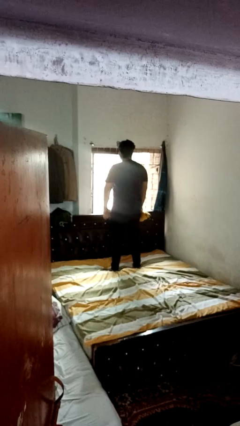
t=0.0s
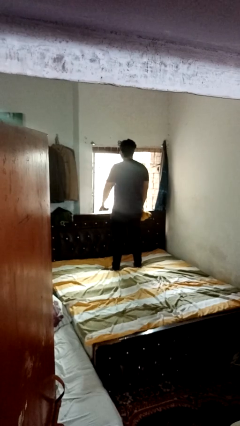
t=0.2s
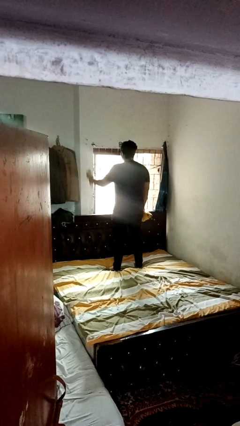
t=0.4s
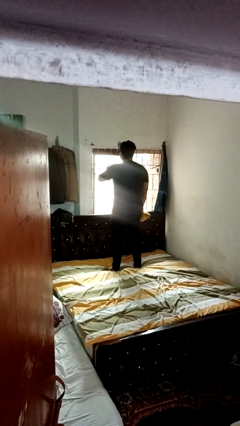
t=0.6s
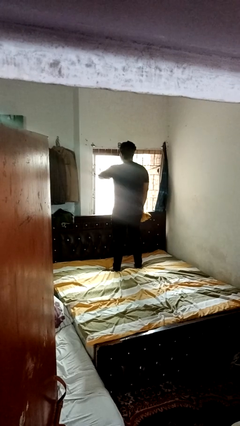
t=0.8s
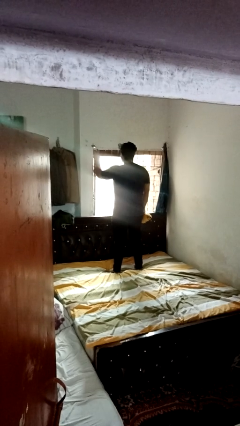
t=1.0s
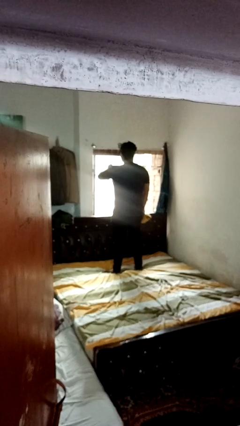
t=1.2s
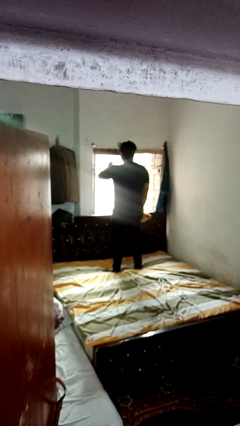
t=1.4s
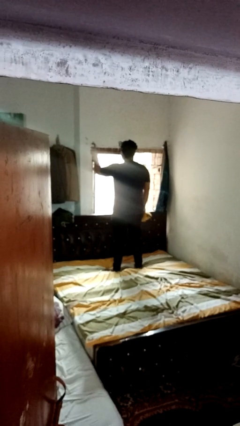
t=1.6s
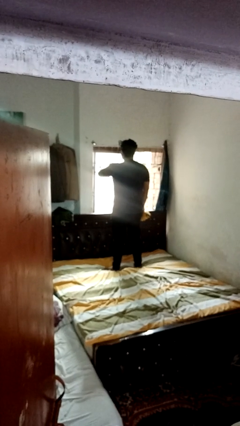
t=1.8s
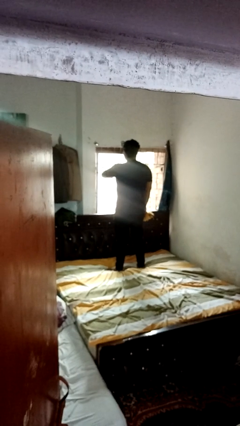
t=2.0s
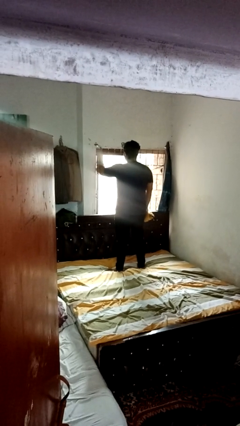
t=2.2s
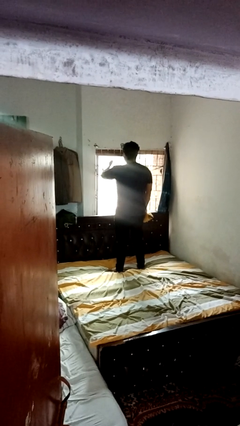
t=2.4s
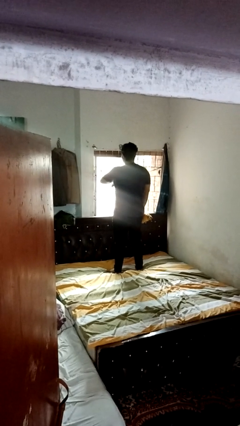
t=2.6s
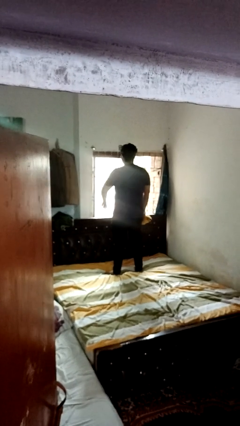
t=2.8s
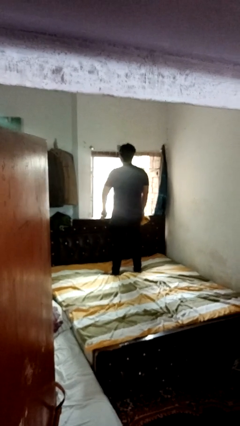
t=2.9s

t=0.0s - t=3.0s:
person sprays from bottle

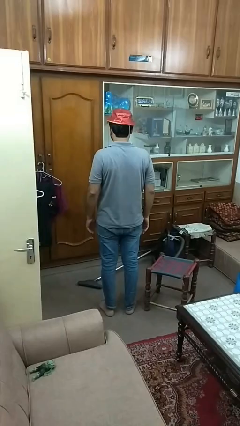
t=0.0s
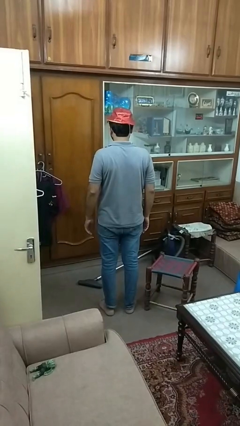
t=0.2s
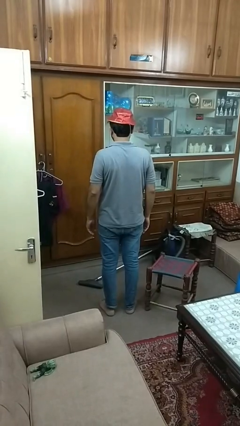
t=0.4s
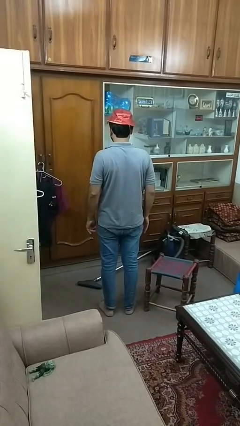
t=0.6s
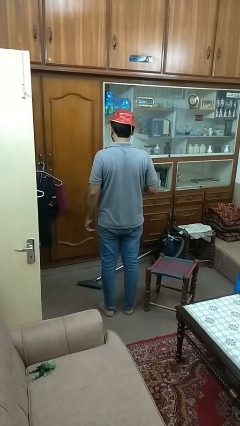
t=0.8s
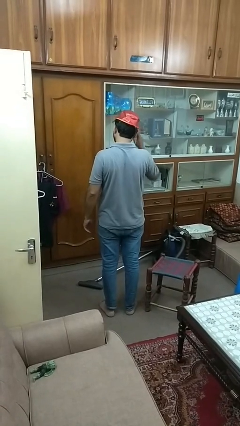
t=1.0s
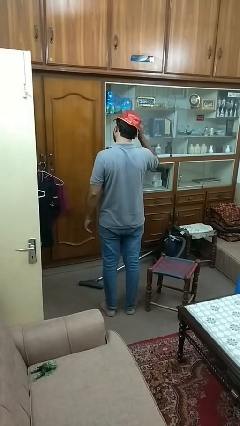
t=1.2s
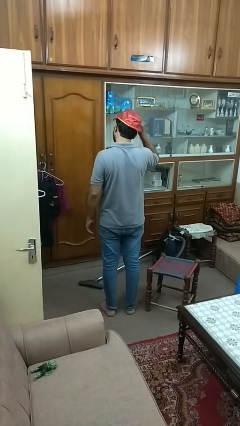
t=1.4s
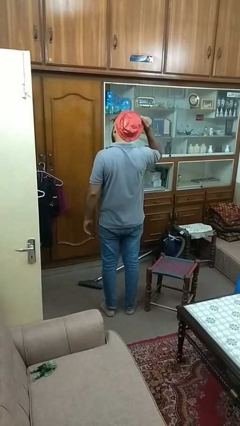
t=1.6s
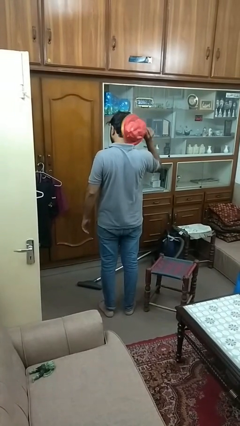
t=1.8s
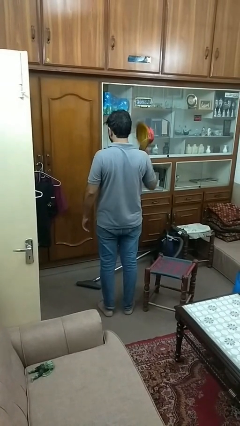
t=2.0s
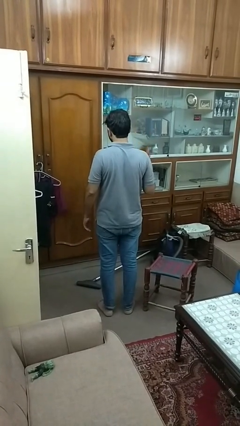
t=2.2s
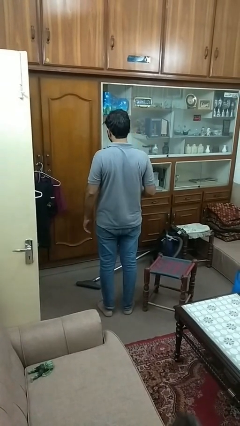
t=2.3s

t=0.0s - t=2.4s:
person takes off hat

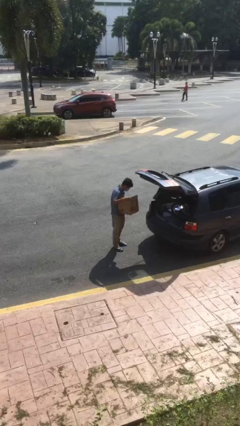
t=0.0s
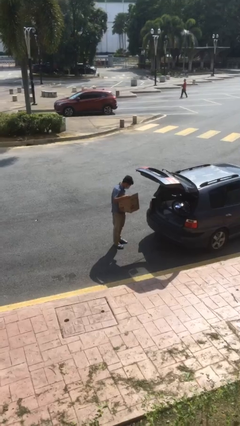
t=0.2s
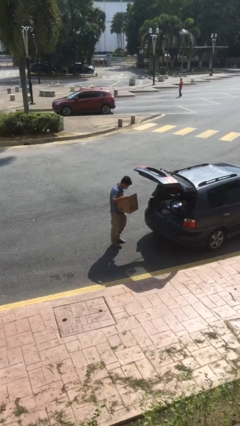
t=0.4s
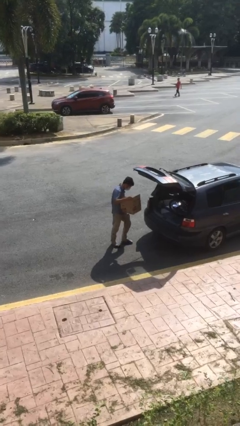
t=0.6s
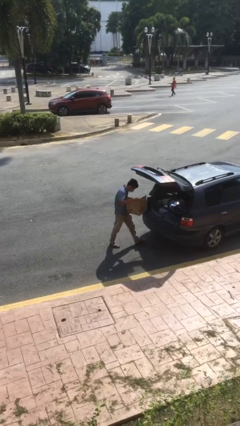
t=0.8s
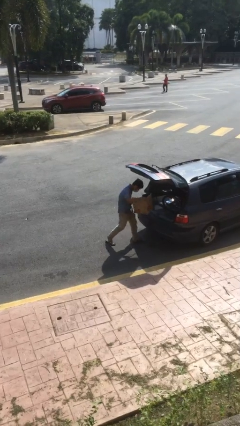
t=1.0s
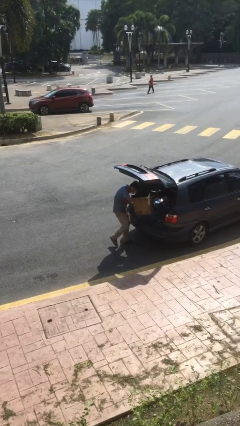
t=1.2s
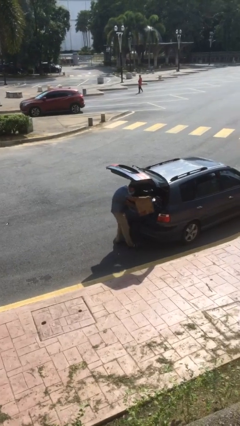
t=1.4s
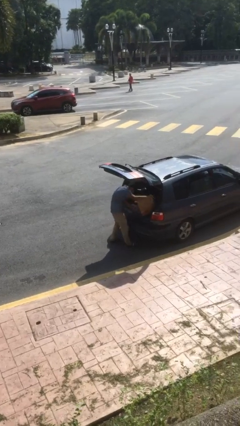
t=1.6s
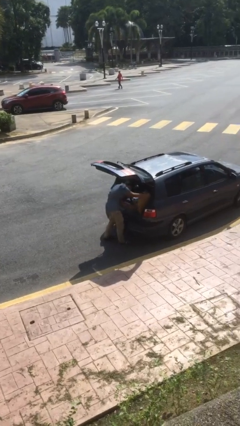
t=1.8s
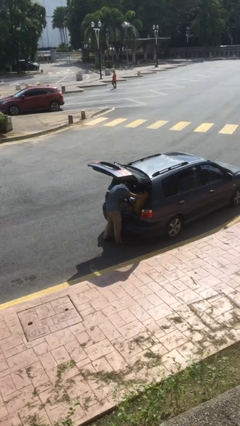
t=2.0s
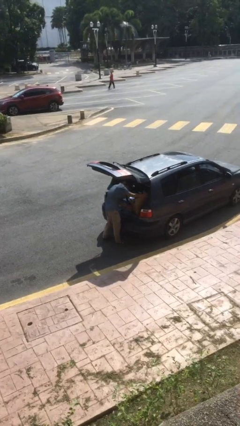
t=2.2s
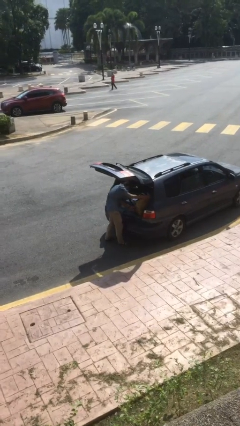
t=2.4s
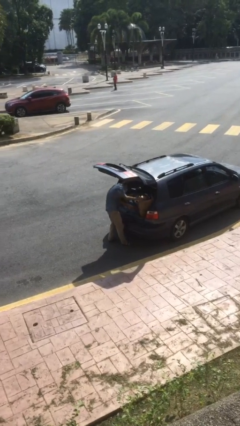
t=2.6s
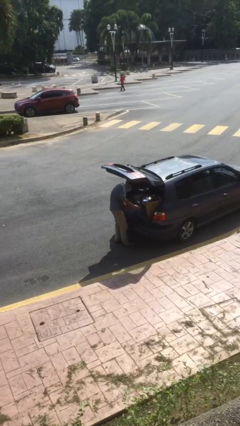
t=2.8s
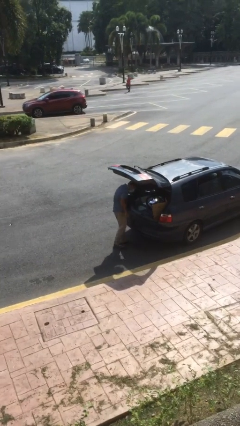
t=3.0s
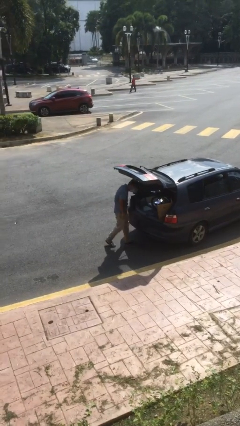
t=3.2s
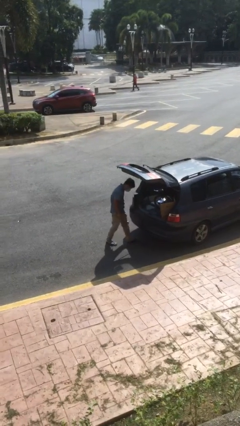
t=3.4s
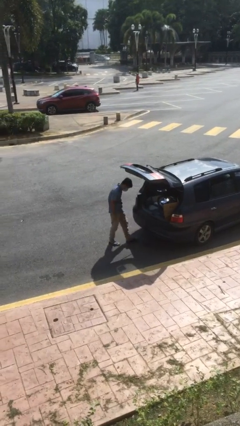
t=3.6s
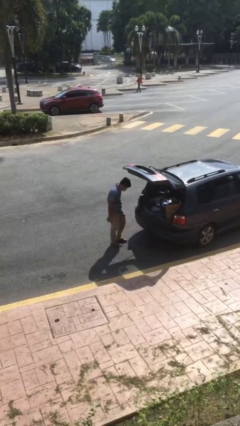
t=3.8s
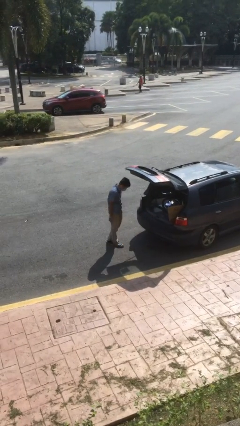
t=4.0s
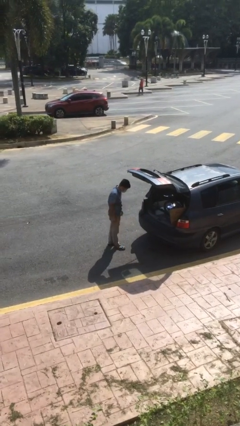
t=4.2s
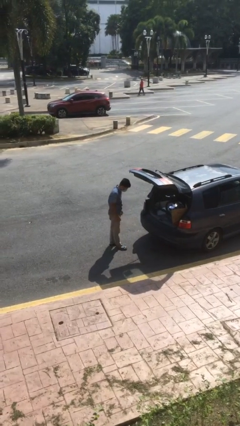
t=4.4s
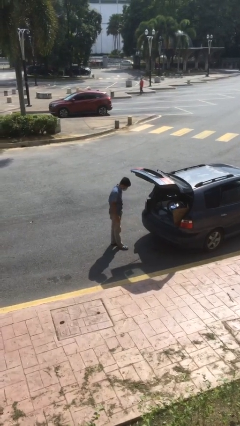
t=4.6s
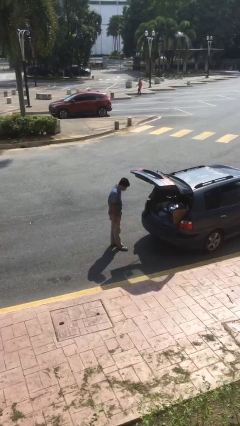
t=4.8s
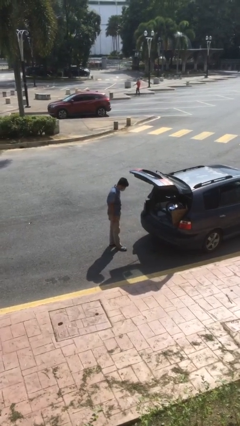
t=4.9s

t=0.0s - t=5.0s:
person loads car

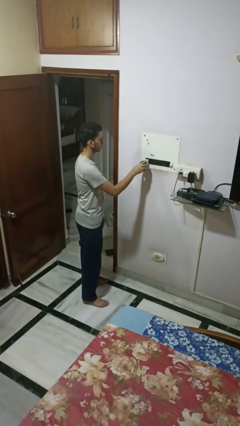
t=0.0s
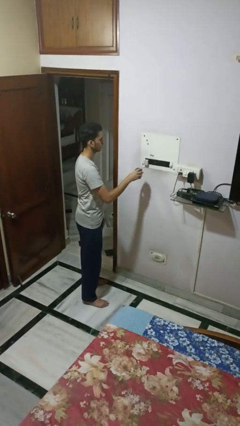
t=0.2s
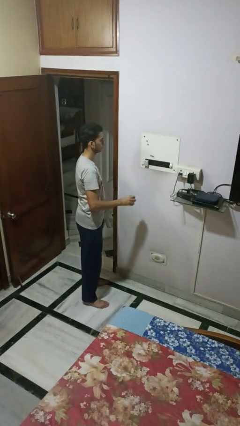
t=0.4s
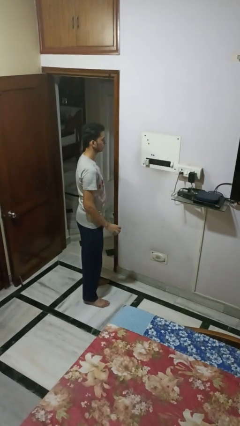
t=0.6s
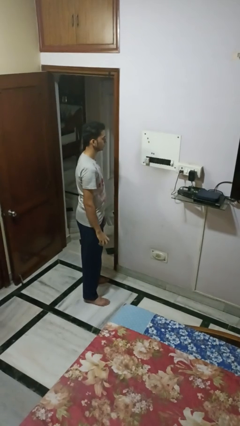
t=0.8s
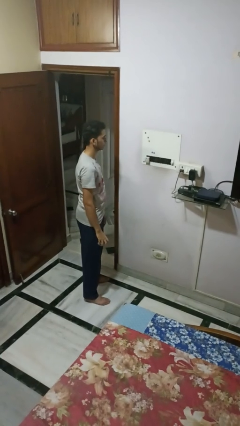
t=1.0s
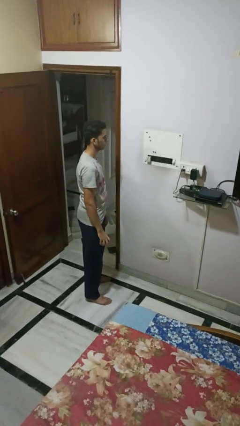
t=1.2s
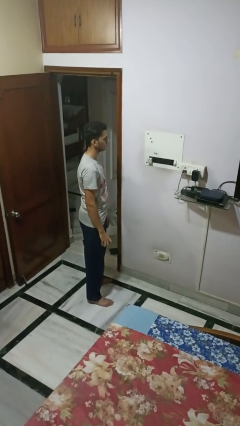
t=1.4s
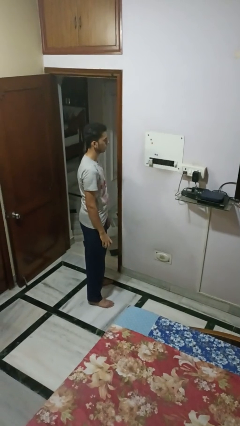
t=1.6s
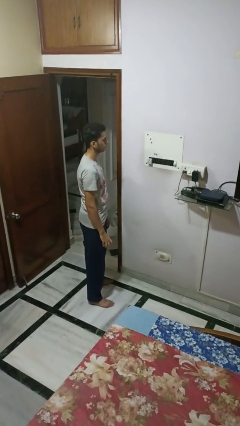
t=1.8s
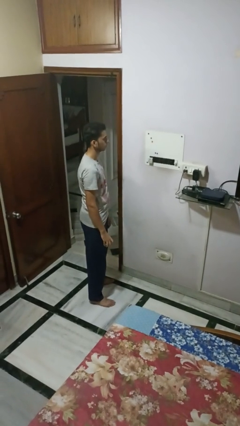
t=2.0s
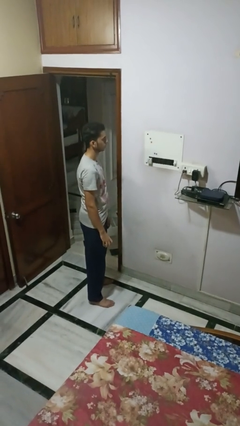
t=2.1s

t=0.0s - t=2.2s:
person unplugs from electrical socket

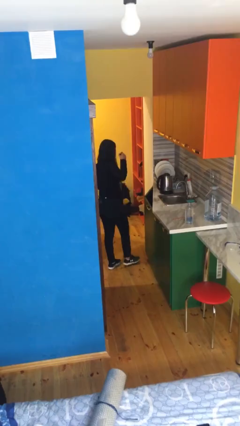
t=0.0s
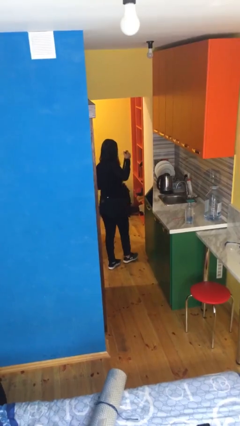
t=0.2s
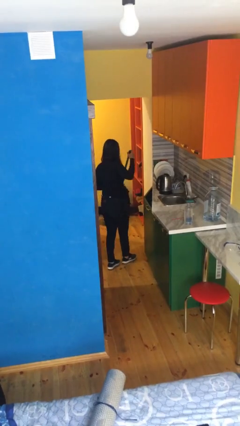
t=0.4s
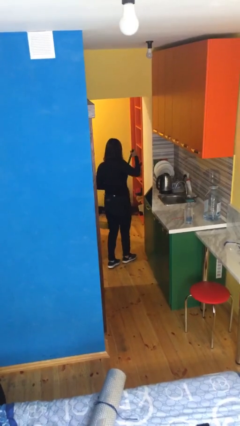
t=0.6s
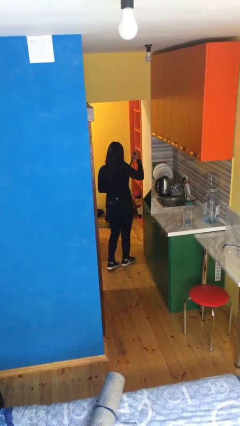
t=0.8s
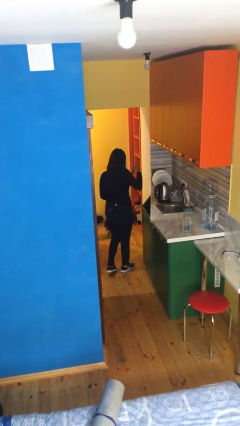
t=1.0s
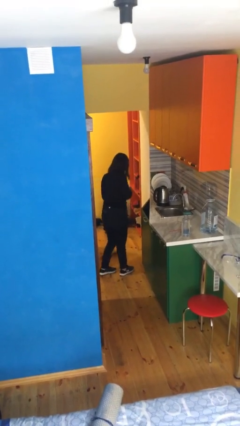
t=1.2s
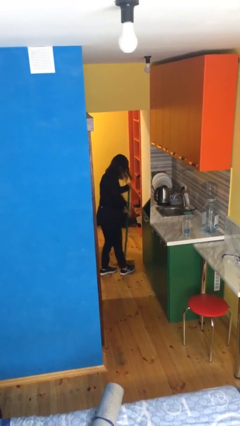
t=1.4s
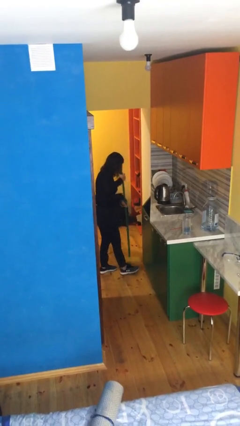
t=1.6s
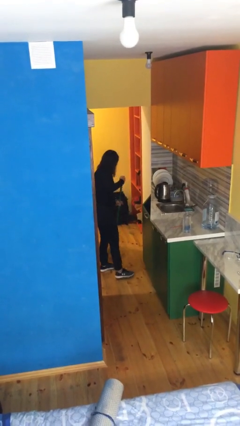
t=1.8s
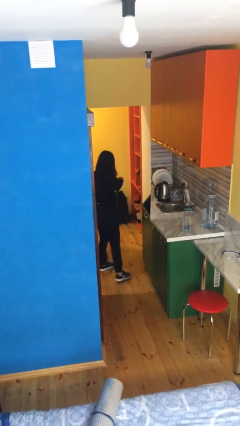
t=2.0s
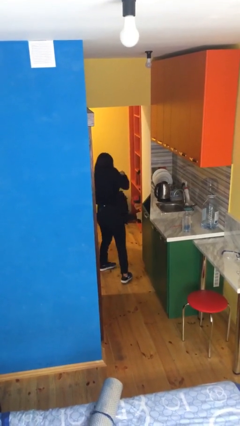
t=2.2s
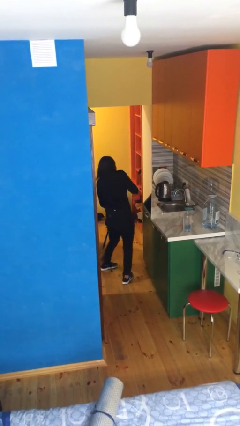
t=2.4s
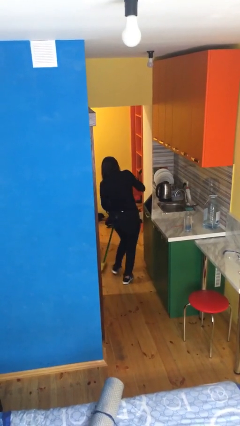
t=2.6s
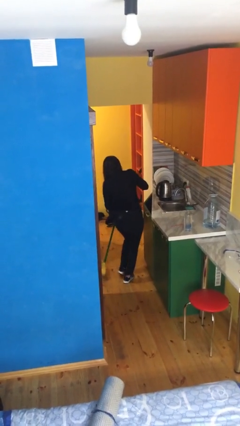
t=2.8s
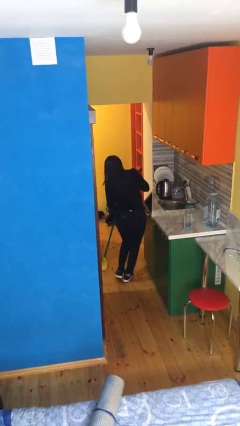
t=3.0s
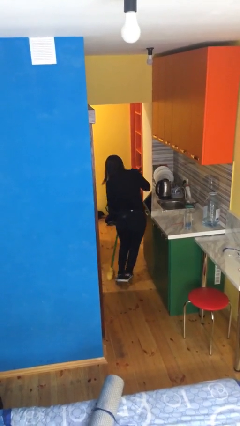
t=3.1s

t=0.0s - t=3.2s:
person sweeps floor

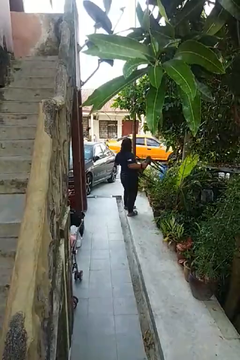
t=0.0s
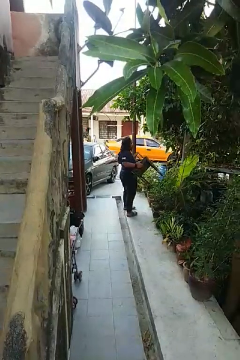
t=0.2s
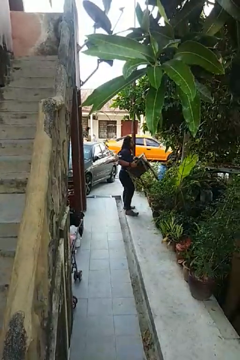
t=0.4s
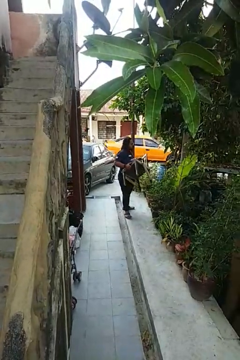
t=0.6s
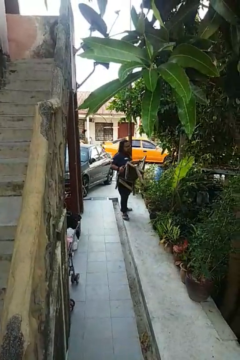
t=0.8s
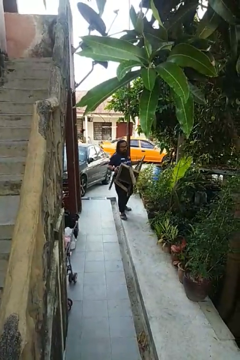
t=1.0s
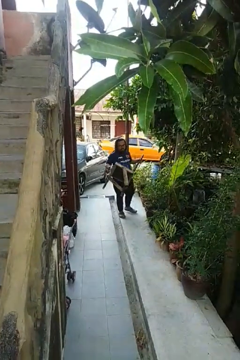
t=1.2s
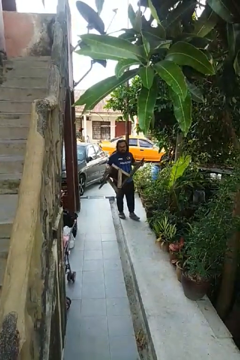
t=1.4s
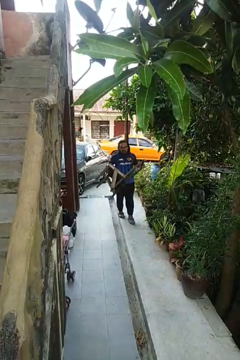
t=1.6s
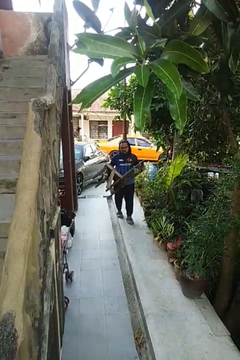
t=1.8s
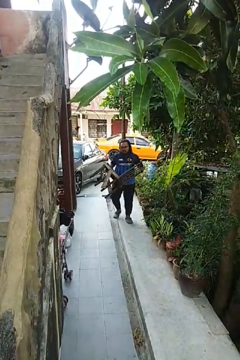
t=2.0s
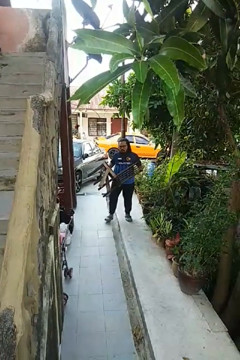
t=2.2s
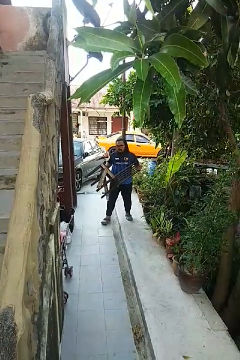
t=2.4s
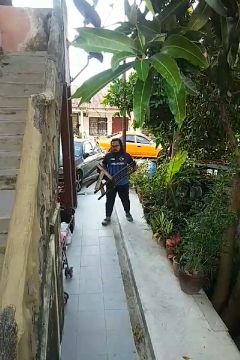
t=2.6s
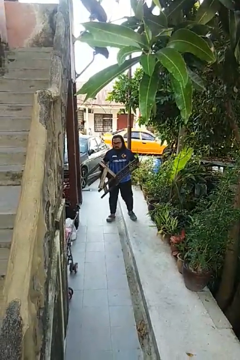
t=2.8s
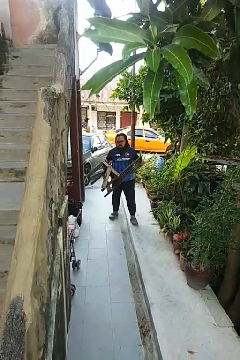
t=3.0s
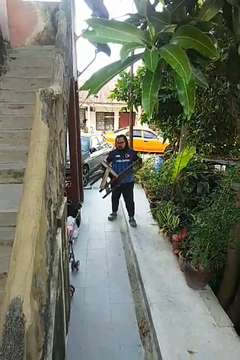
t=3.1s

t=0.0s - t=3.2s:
person carries furniture
